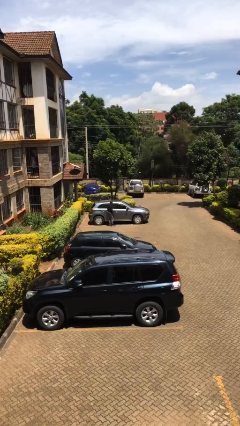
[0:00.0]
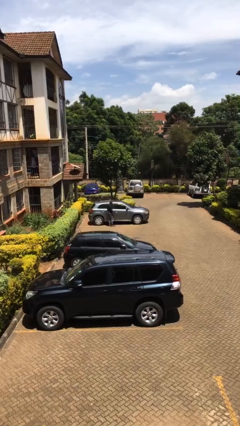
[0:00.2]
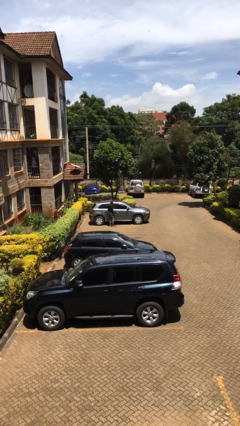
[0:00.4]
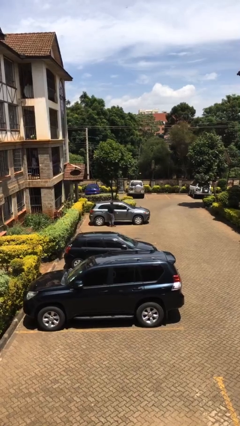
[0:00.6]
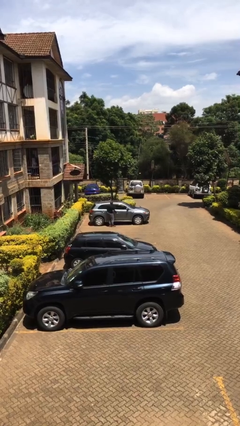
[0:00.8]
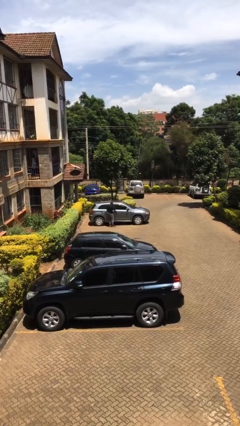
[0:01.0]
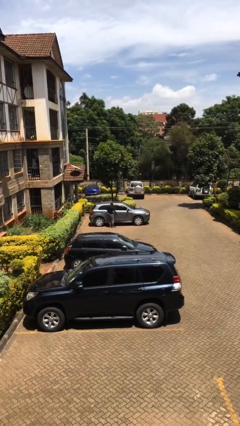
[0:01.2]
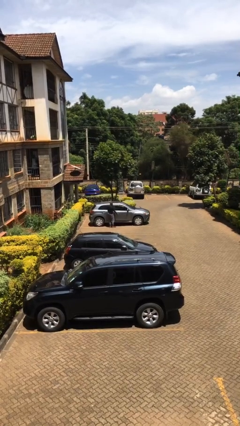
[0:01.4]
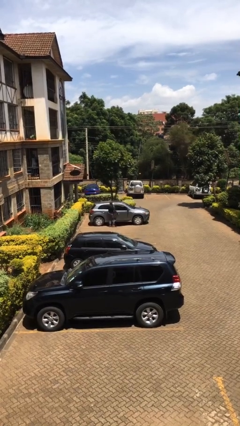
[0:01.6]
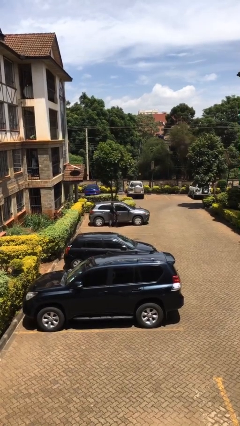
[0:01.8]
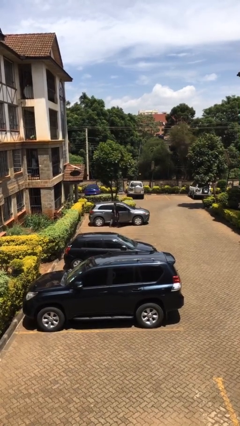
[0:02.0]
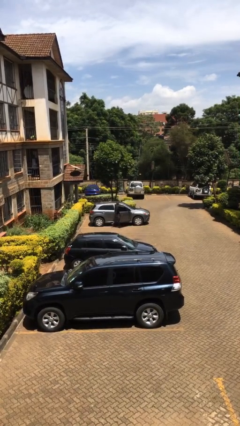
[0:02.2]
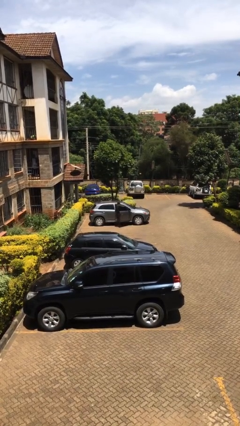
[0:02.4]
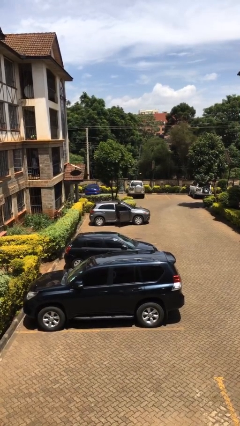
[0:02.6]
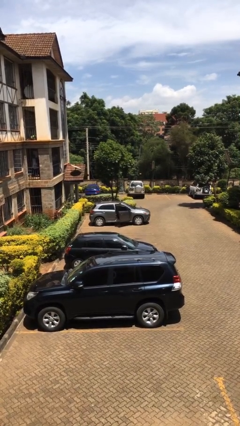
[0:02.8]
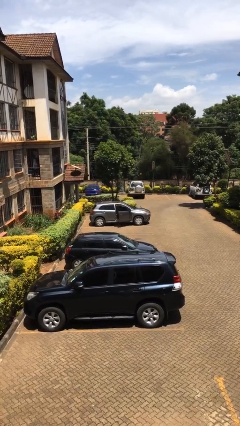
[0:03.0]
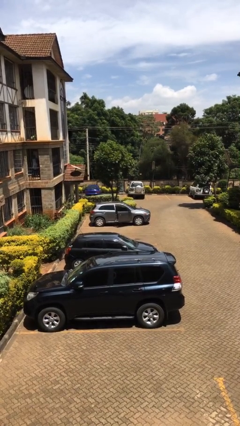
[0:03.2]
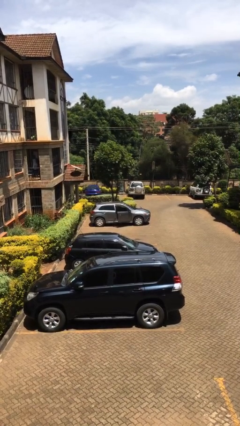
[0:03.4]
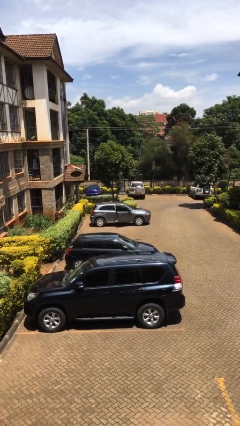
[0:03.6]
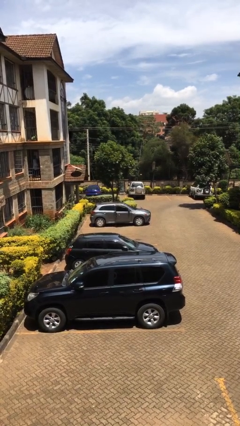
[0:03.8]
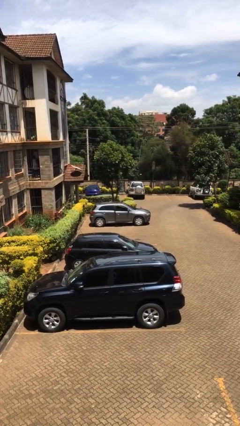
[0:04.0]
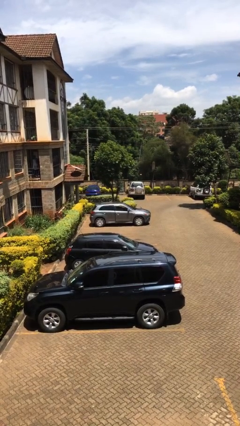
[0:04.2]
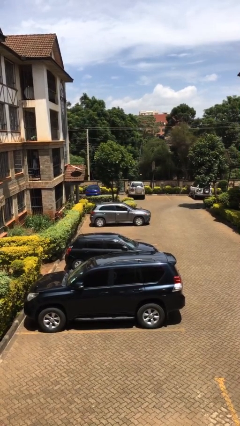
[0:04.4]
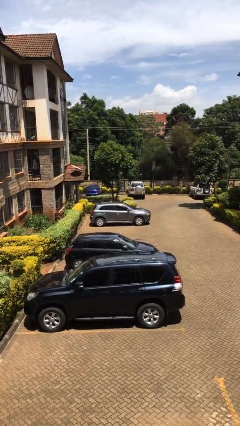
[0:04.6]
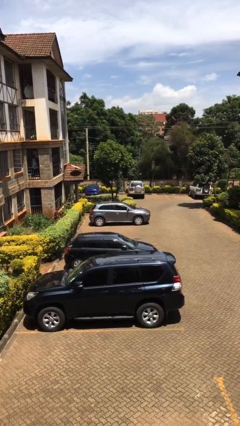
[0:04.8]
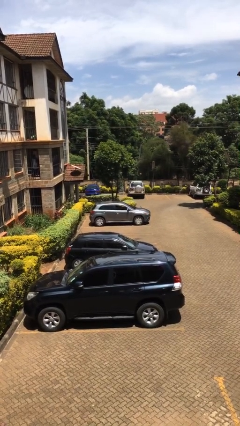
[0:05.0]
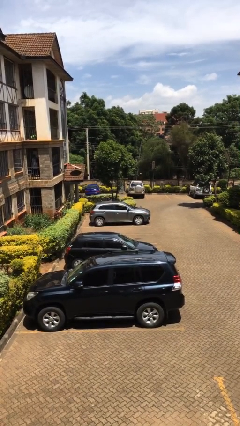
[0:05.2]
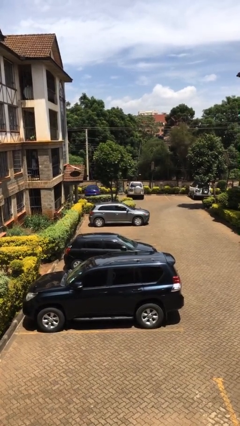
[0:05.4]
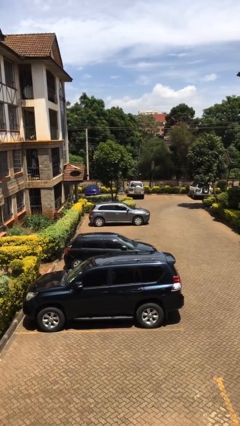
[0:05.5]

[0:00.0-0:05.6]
car picks up person

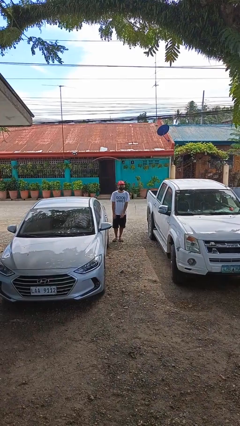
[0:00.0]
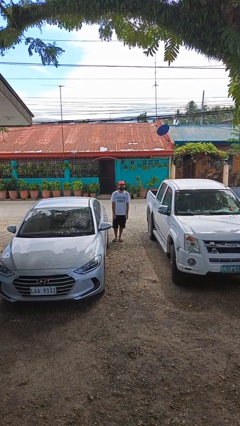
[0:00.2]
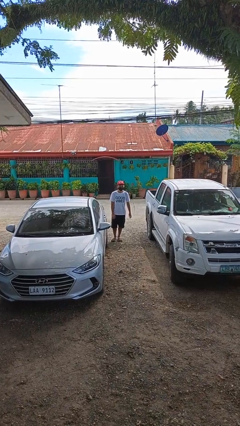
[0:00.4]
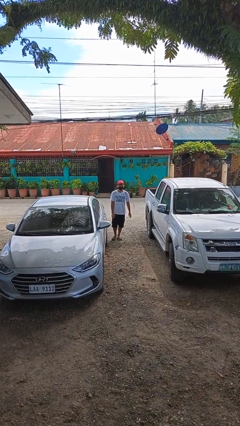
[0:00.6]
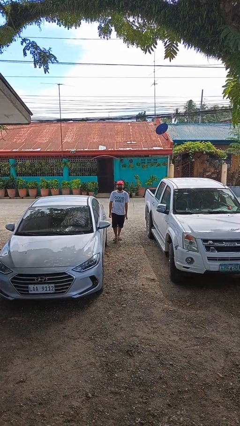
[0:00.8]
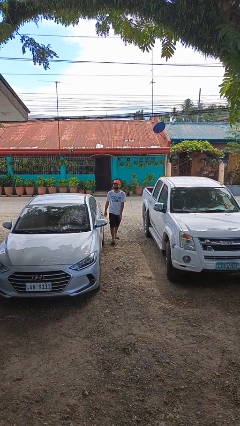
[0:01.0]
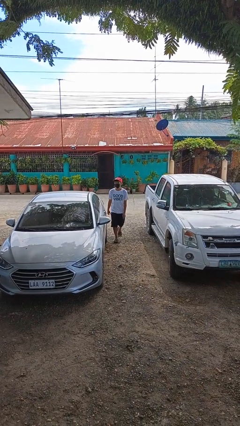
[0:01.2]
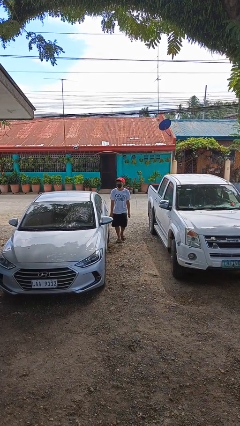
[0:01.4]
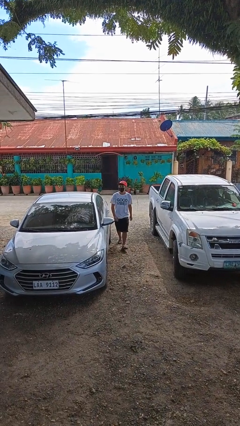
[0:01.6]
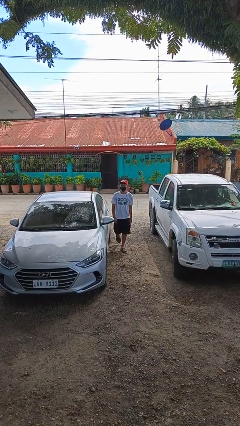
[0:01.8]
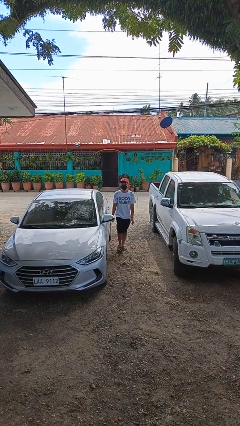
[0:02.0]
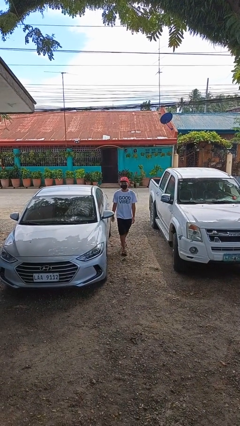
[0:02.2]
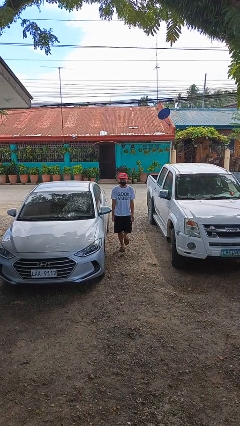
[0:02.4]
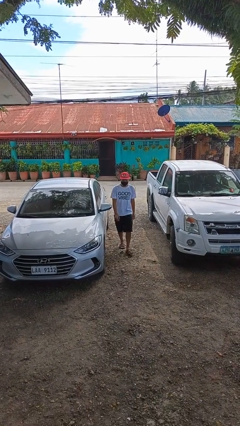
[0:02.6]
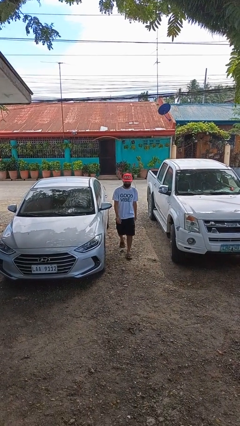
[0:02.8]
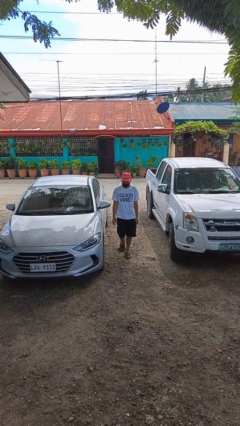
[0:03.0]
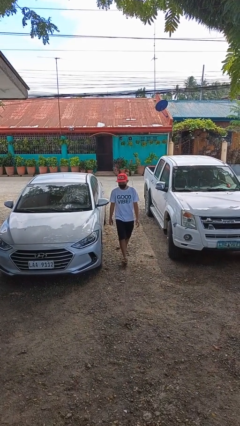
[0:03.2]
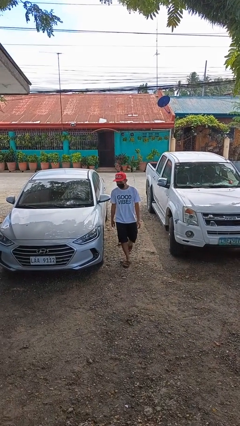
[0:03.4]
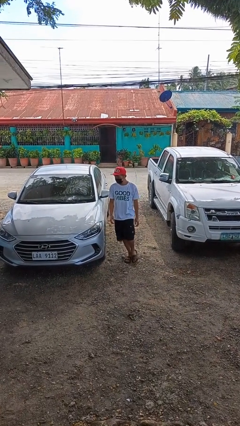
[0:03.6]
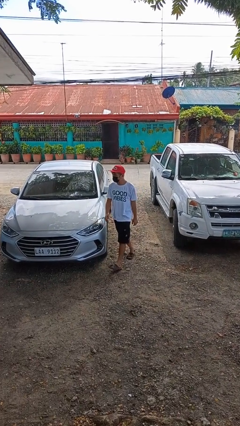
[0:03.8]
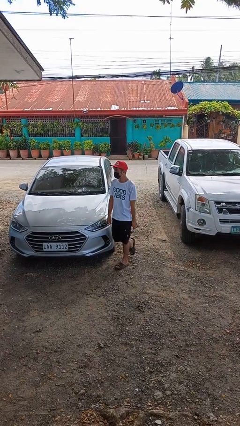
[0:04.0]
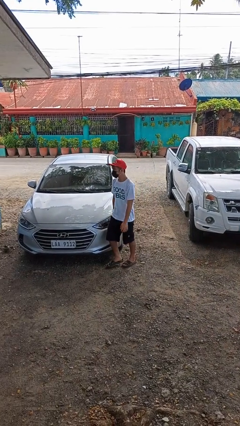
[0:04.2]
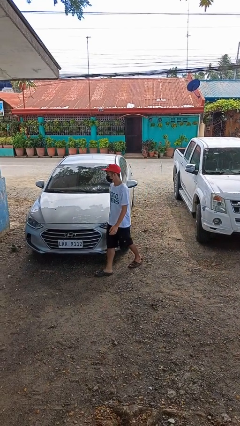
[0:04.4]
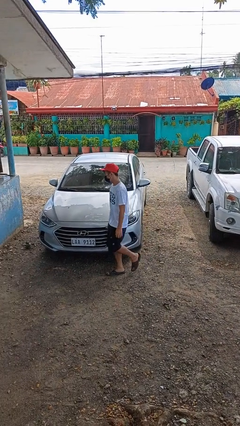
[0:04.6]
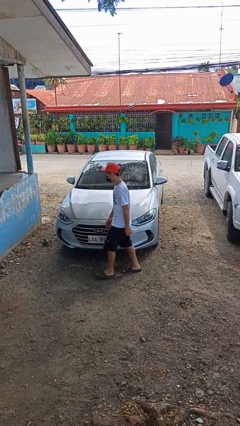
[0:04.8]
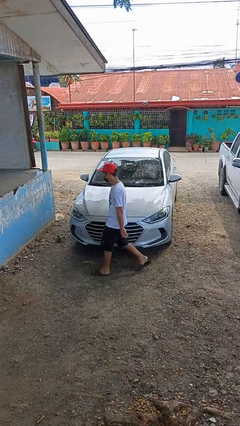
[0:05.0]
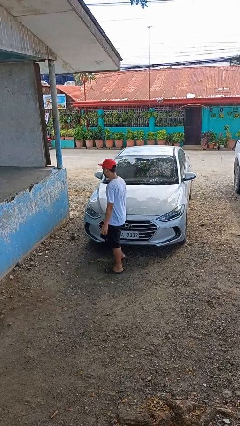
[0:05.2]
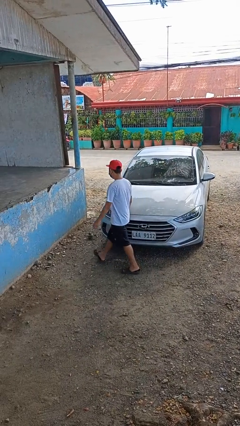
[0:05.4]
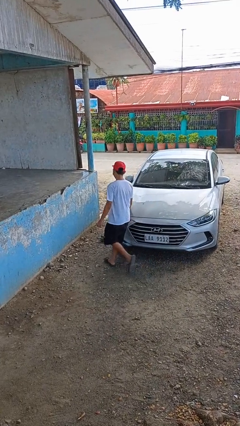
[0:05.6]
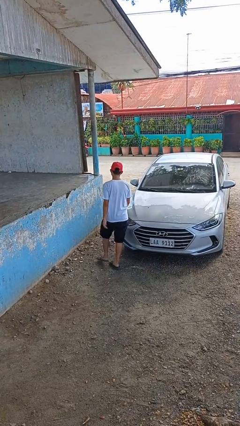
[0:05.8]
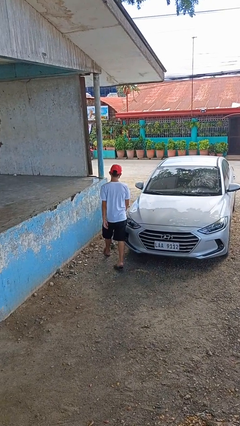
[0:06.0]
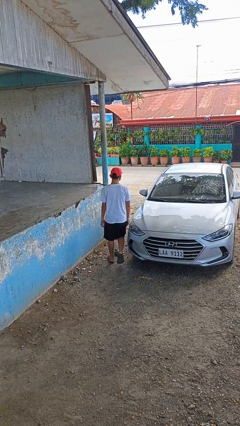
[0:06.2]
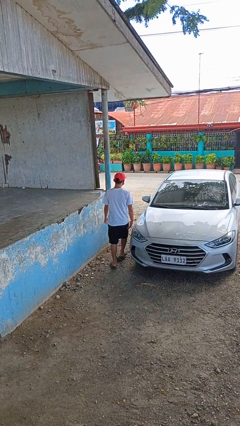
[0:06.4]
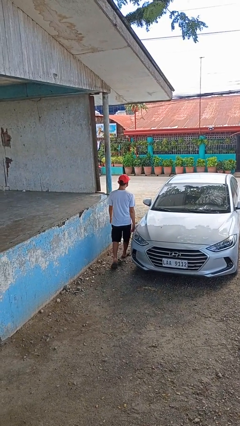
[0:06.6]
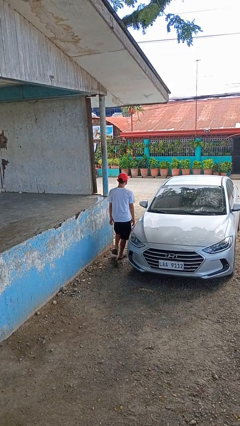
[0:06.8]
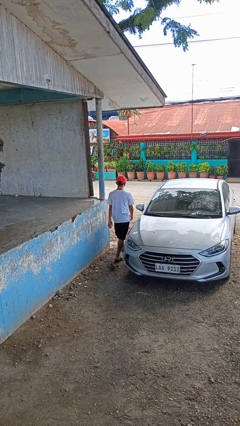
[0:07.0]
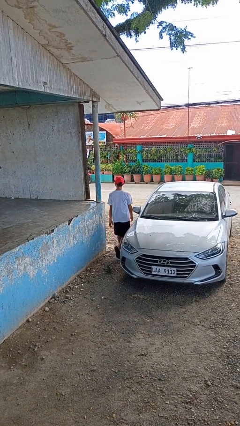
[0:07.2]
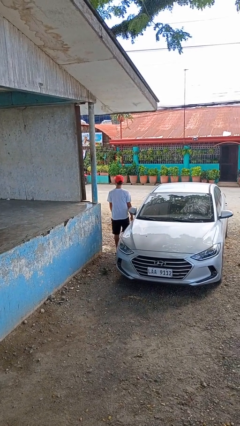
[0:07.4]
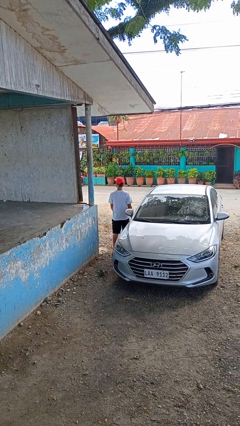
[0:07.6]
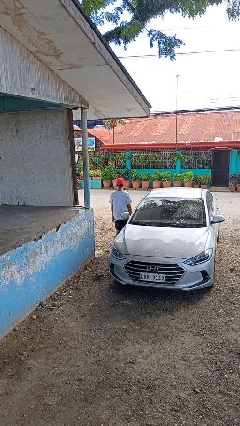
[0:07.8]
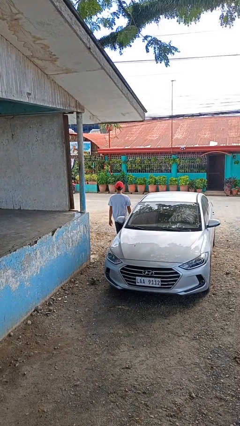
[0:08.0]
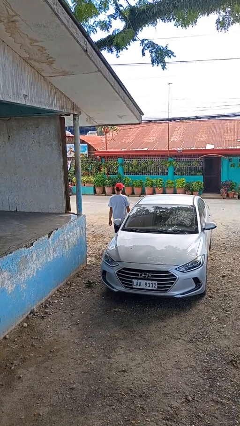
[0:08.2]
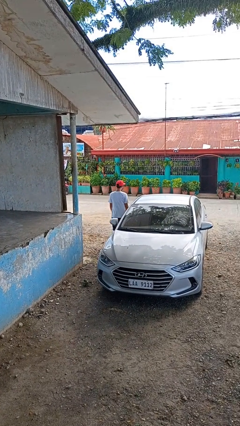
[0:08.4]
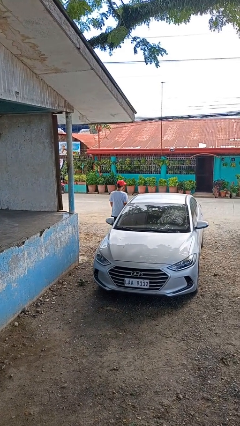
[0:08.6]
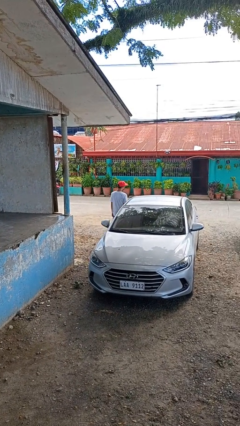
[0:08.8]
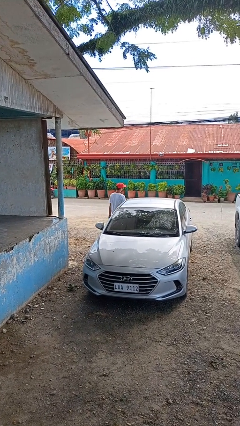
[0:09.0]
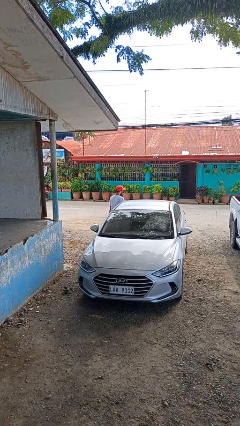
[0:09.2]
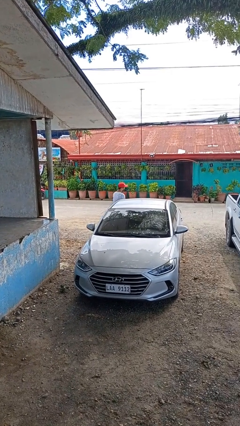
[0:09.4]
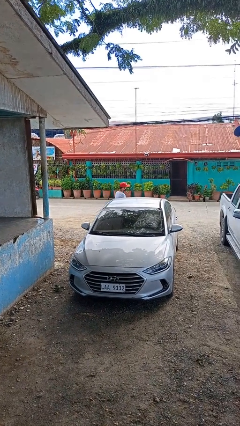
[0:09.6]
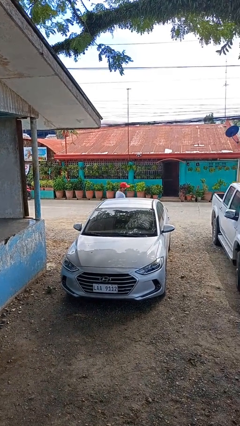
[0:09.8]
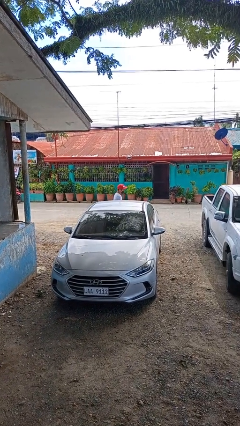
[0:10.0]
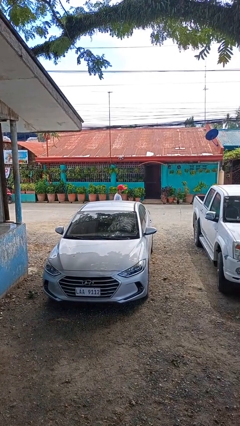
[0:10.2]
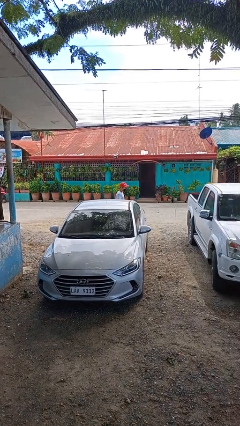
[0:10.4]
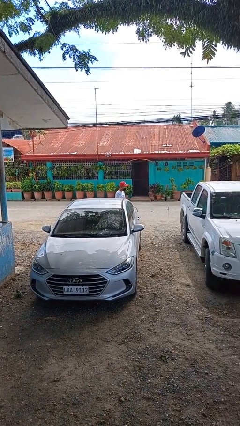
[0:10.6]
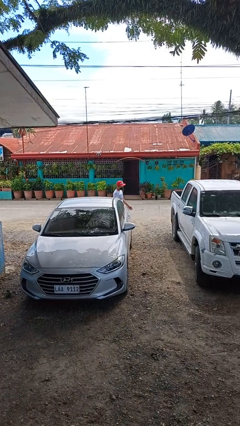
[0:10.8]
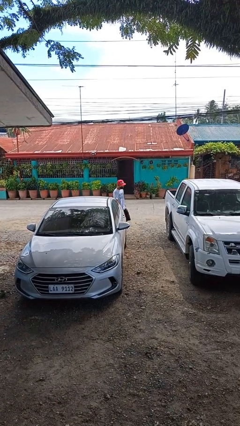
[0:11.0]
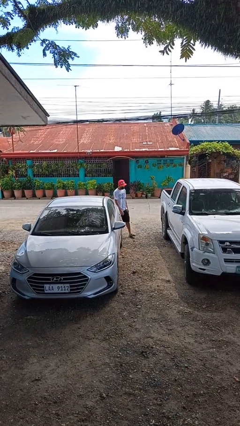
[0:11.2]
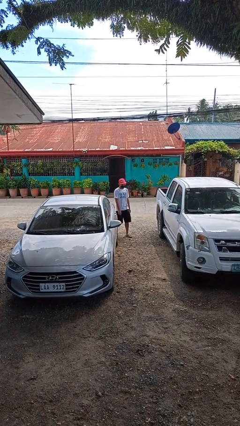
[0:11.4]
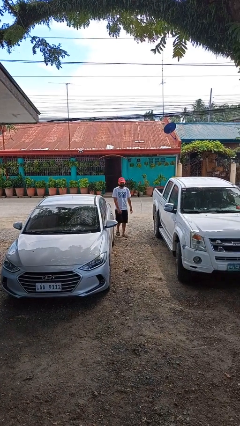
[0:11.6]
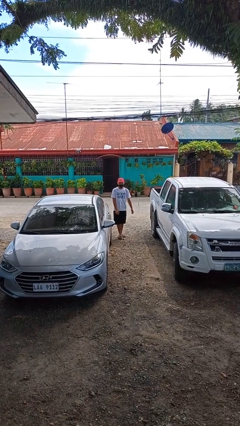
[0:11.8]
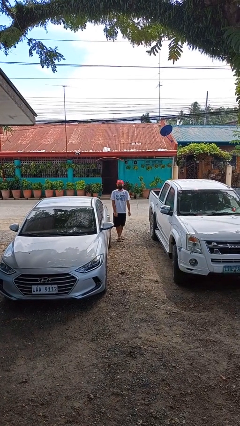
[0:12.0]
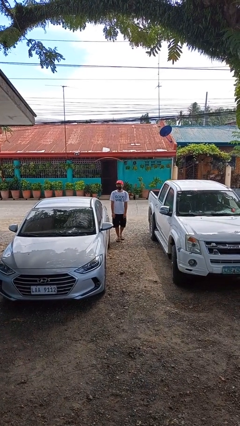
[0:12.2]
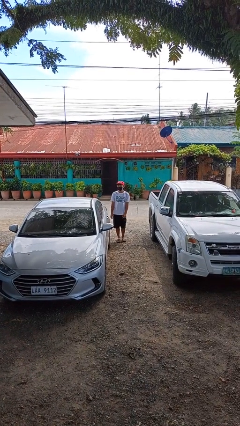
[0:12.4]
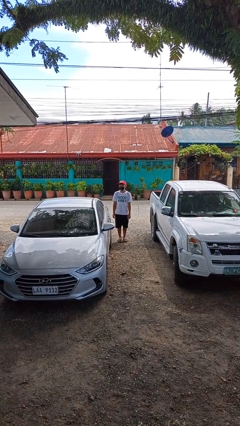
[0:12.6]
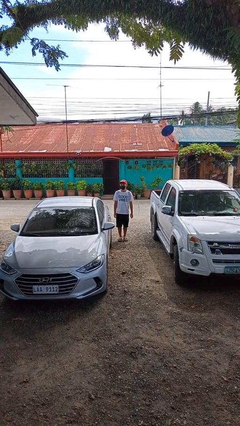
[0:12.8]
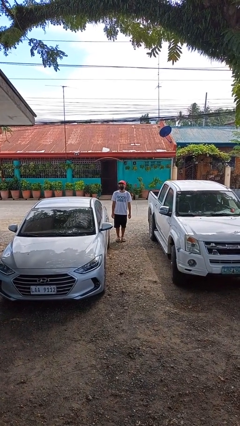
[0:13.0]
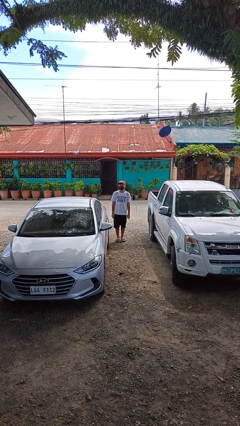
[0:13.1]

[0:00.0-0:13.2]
person walks around car
